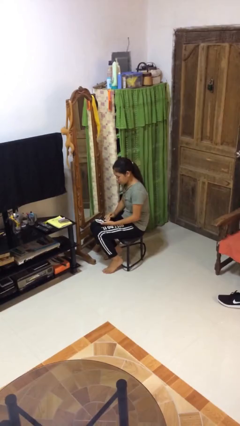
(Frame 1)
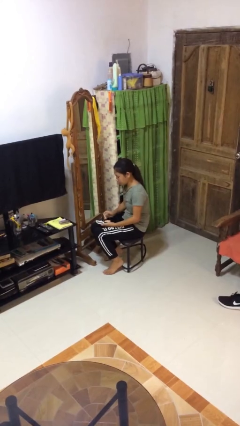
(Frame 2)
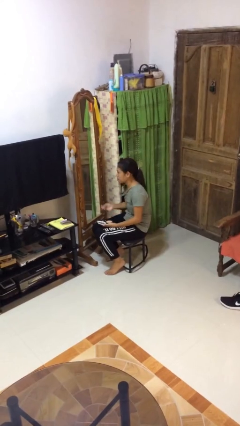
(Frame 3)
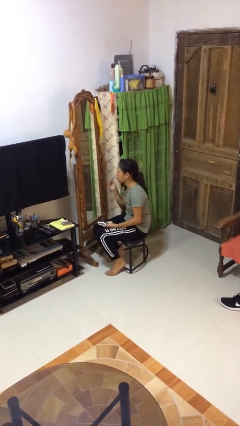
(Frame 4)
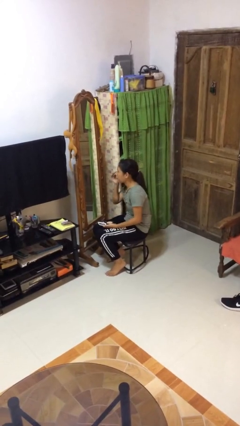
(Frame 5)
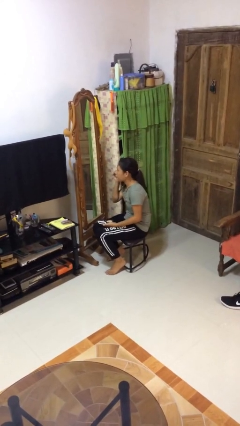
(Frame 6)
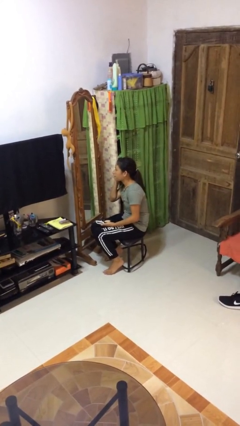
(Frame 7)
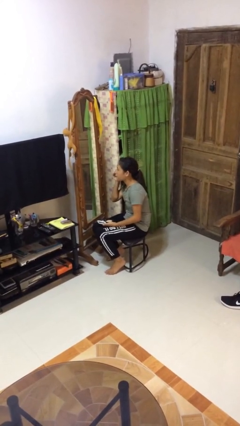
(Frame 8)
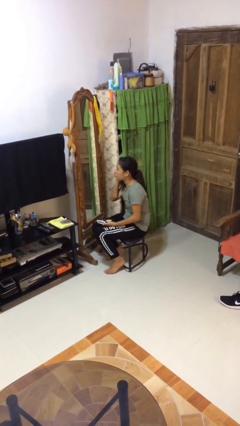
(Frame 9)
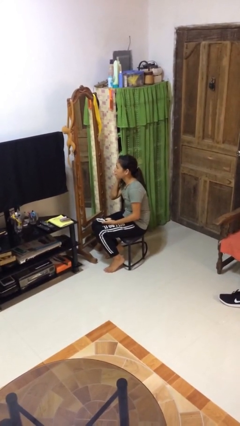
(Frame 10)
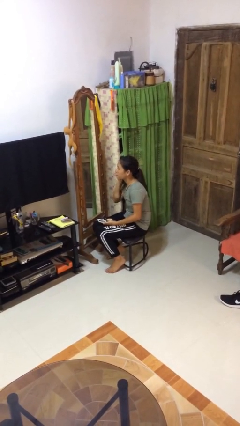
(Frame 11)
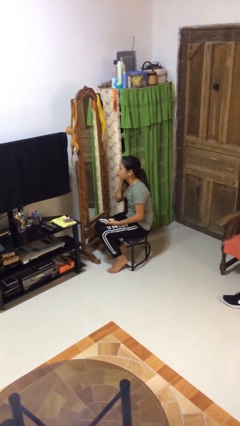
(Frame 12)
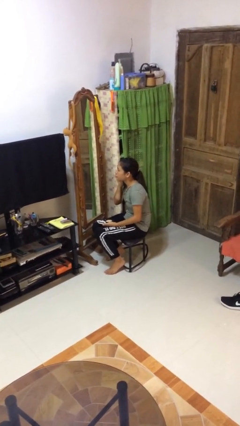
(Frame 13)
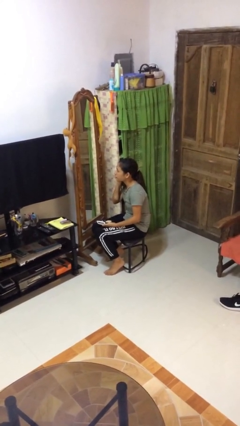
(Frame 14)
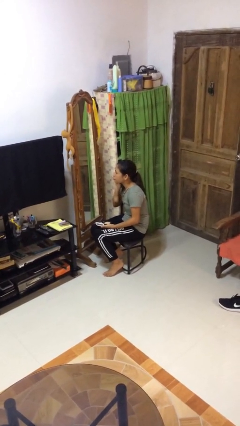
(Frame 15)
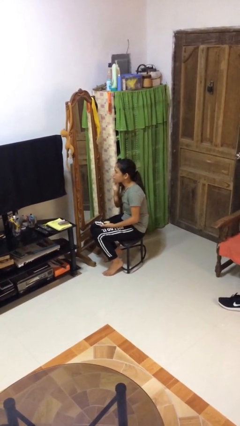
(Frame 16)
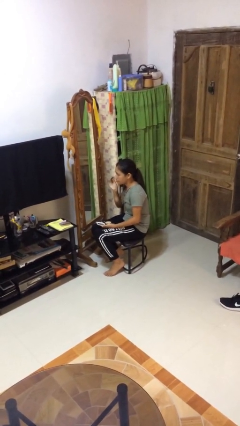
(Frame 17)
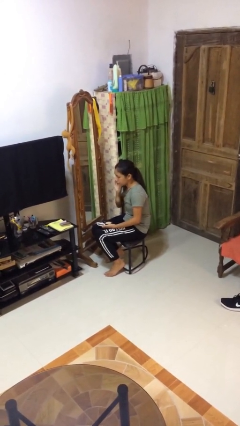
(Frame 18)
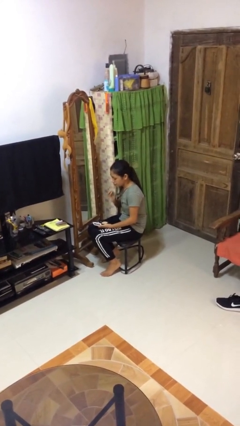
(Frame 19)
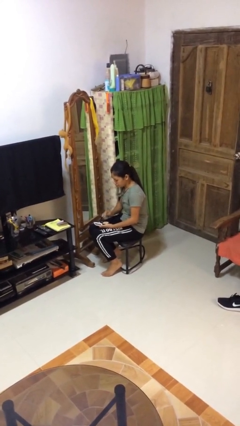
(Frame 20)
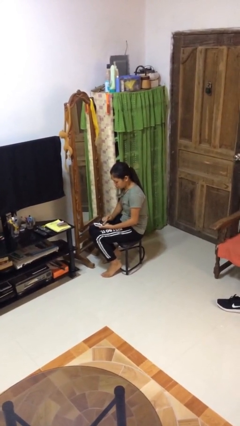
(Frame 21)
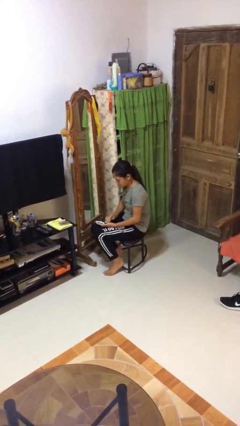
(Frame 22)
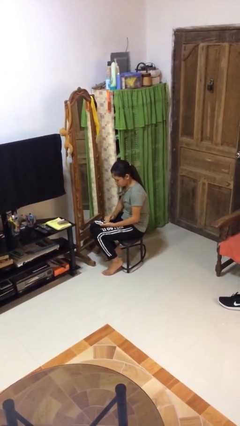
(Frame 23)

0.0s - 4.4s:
person applies foundation makeup

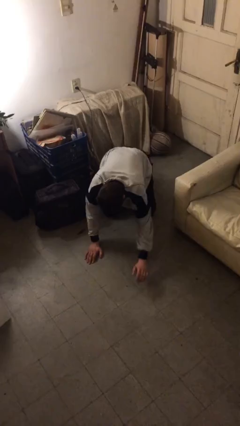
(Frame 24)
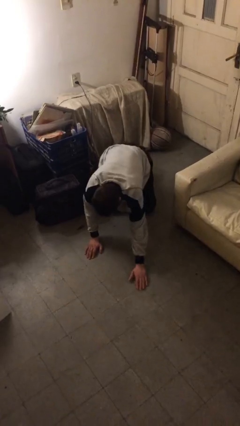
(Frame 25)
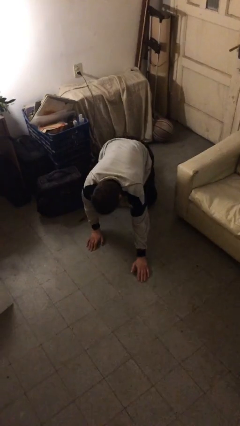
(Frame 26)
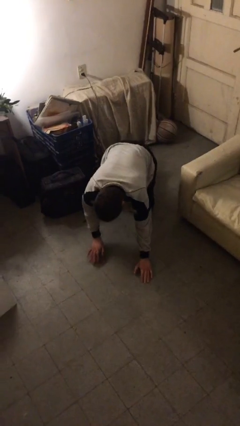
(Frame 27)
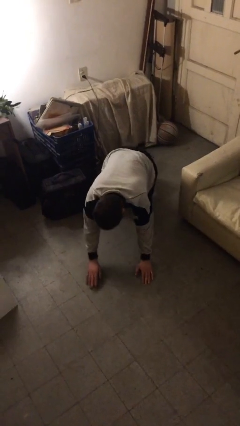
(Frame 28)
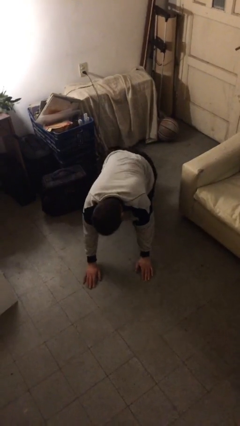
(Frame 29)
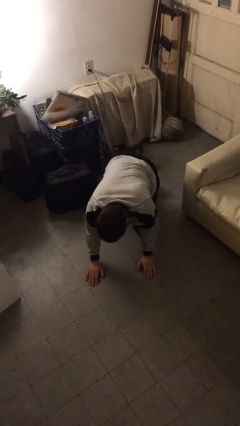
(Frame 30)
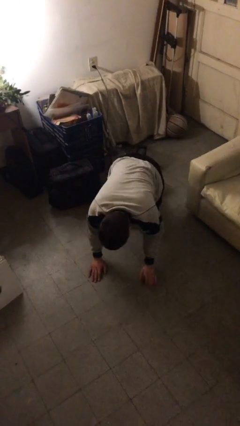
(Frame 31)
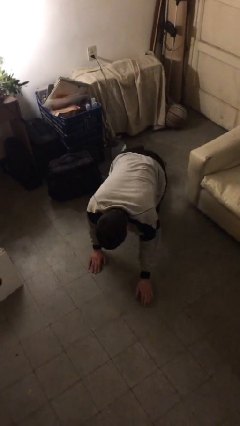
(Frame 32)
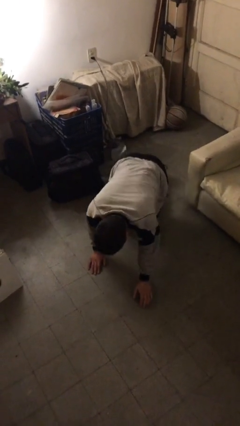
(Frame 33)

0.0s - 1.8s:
person crawls

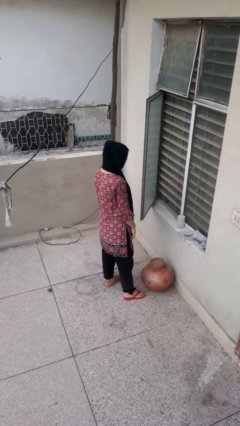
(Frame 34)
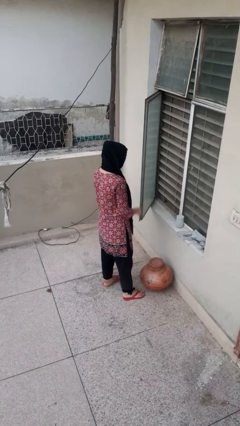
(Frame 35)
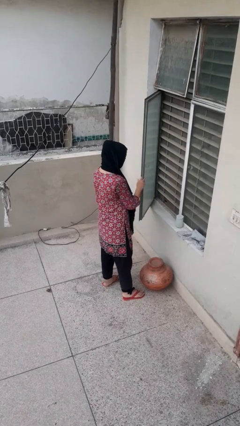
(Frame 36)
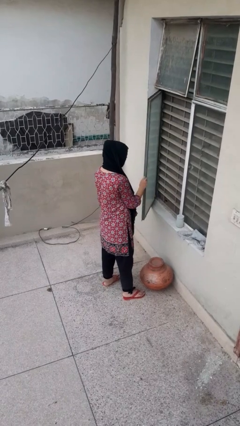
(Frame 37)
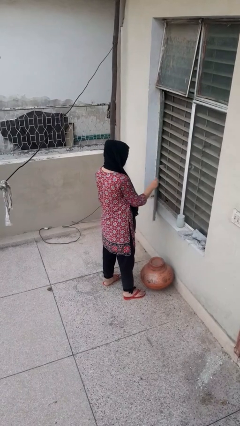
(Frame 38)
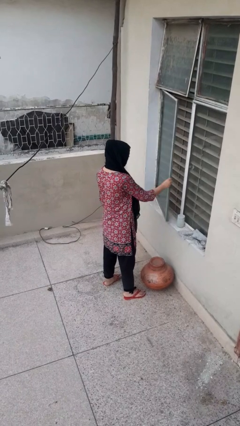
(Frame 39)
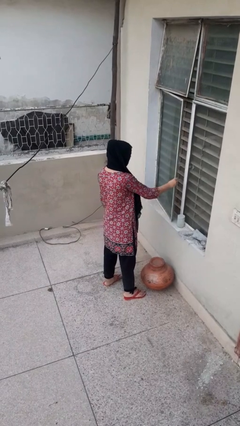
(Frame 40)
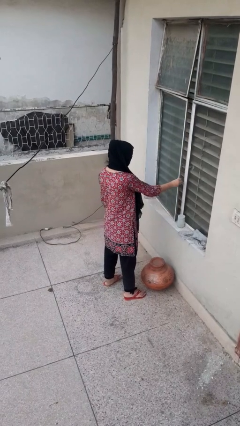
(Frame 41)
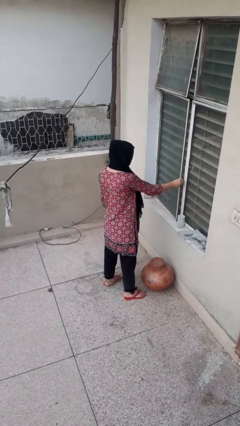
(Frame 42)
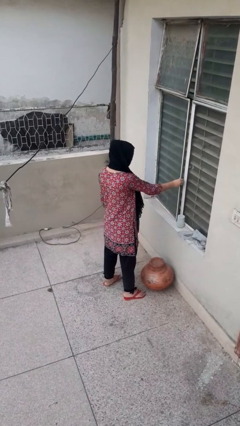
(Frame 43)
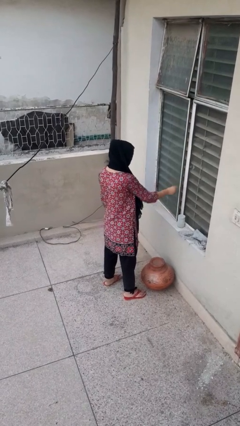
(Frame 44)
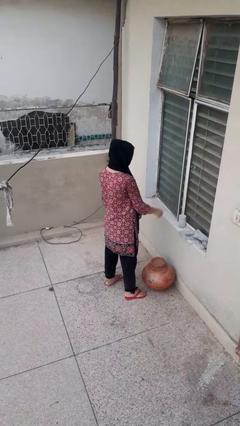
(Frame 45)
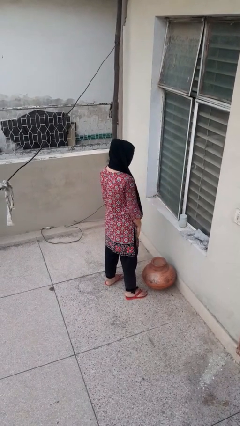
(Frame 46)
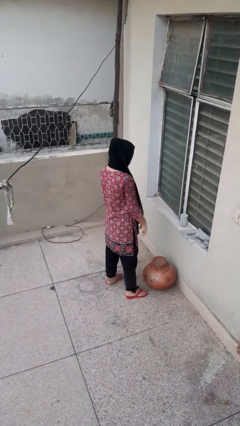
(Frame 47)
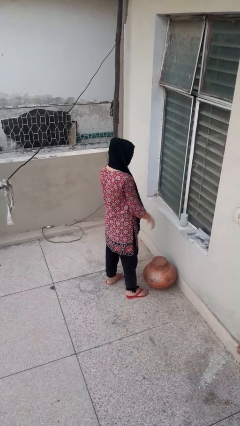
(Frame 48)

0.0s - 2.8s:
person closes home window

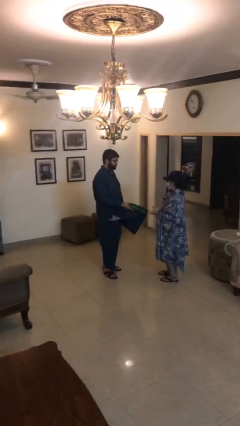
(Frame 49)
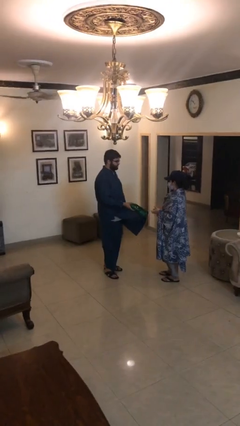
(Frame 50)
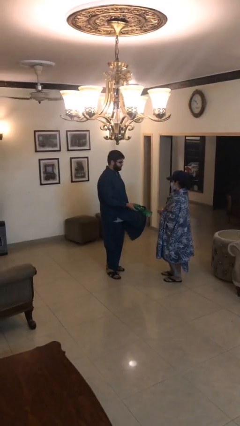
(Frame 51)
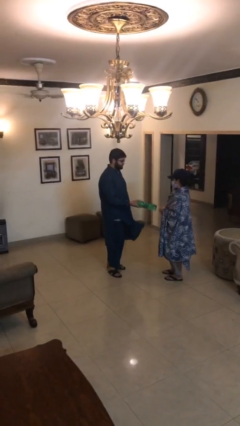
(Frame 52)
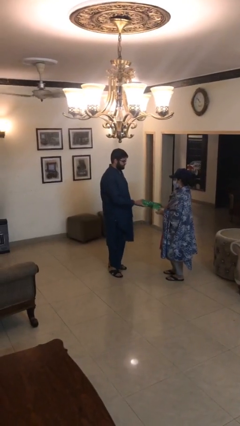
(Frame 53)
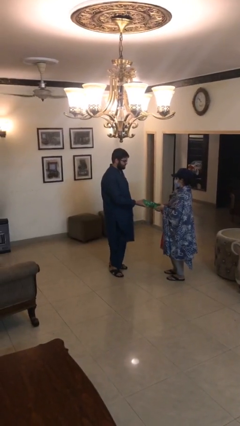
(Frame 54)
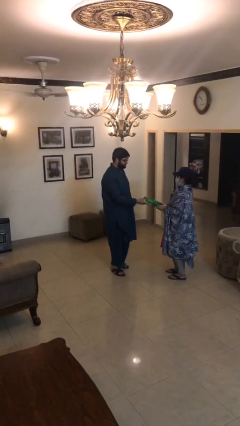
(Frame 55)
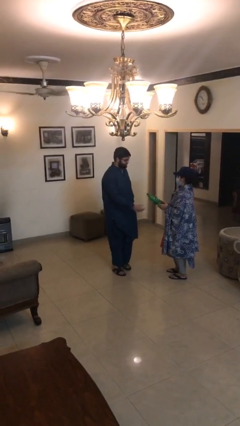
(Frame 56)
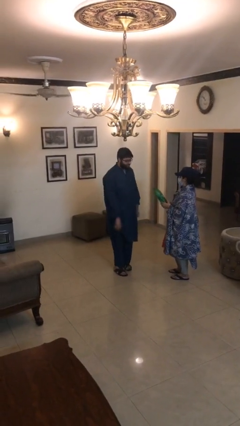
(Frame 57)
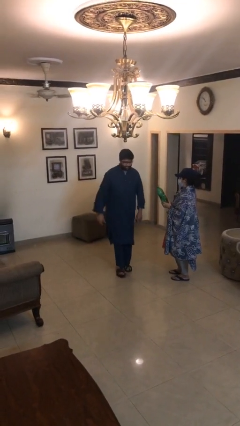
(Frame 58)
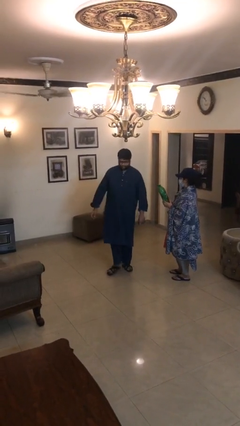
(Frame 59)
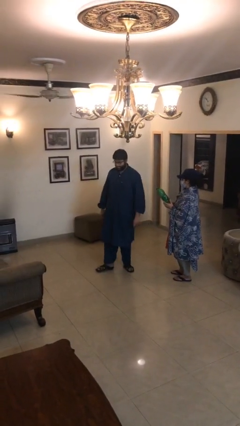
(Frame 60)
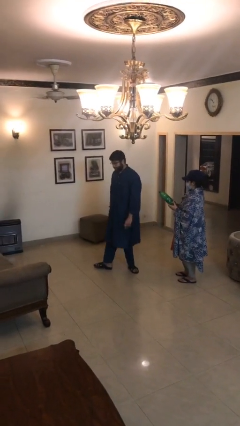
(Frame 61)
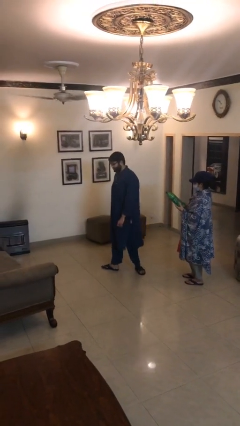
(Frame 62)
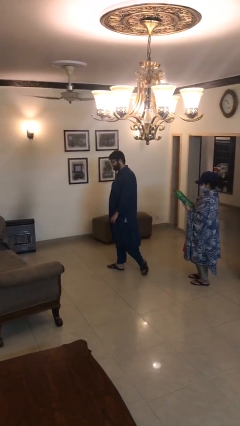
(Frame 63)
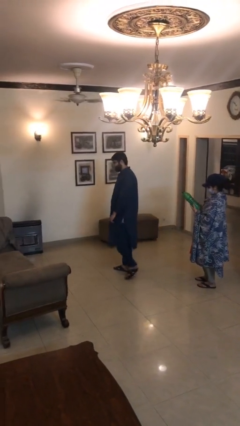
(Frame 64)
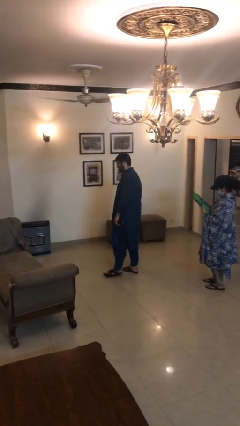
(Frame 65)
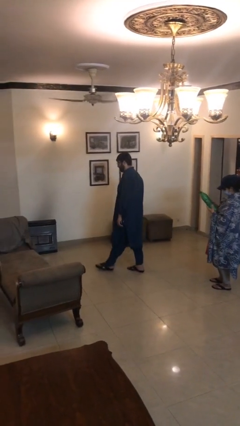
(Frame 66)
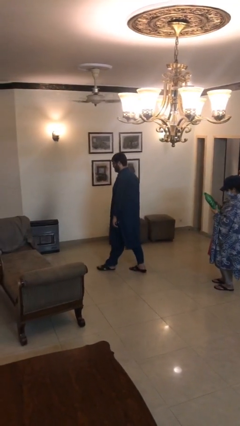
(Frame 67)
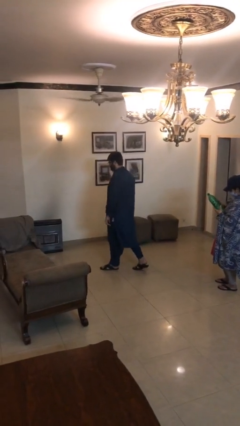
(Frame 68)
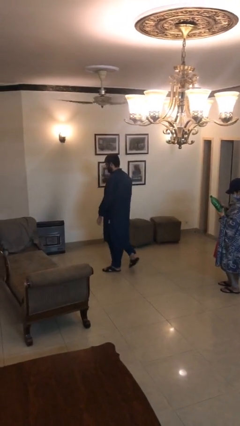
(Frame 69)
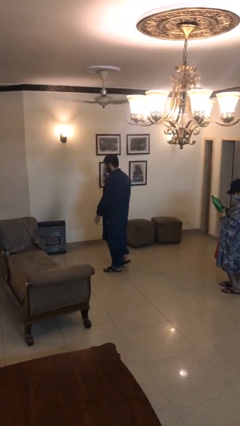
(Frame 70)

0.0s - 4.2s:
person transfers object to person

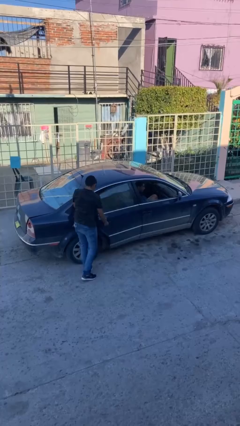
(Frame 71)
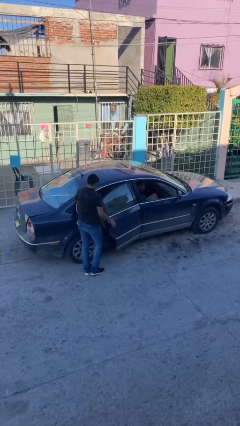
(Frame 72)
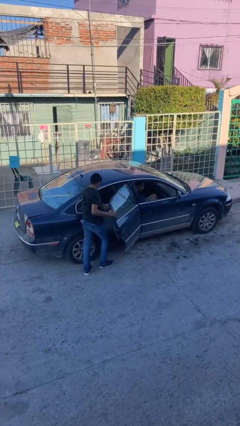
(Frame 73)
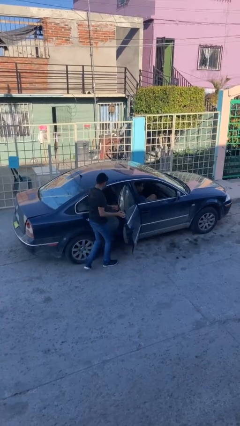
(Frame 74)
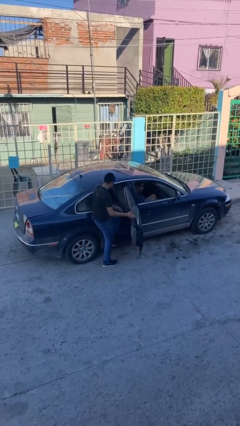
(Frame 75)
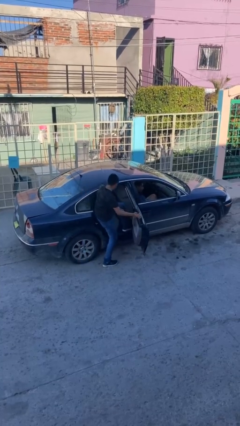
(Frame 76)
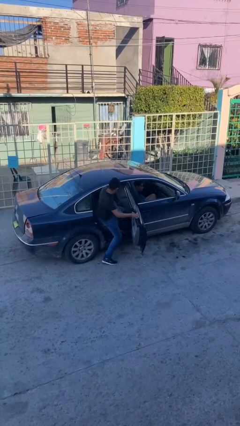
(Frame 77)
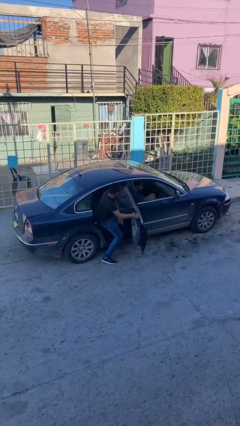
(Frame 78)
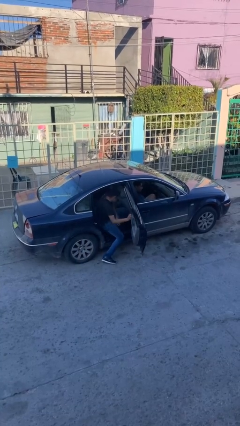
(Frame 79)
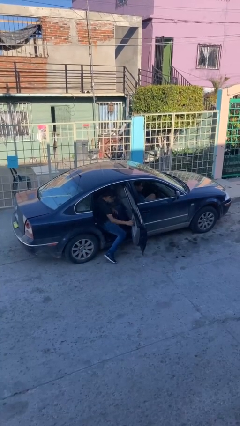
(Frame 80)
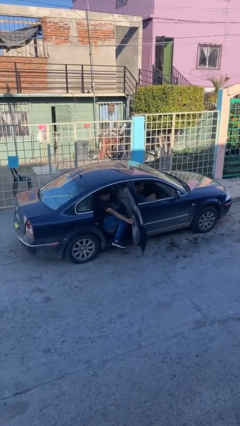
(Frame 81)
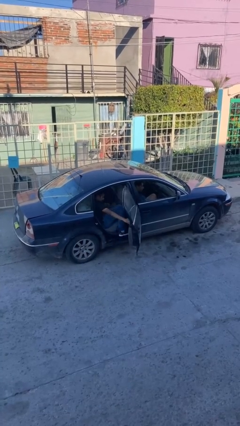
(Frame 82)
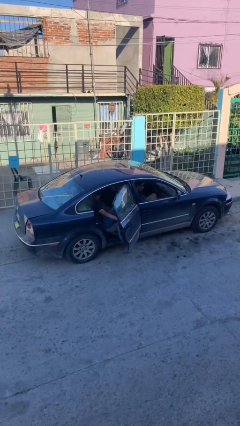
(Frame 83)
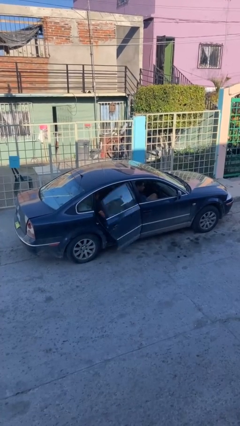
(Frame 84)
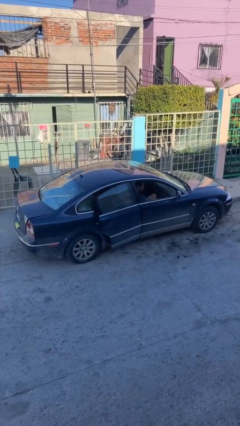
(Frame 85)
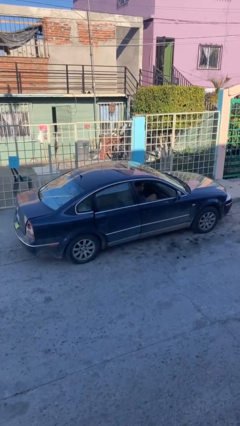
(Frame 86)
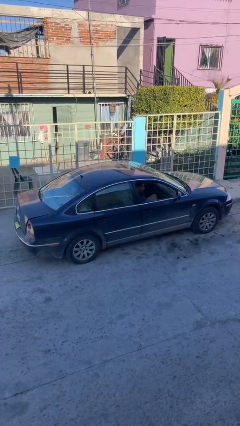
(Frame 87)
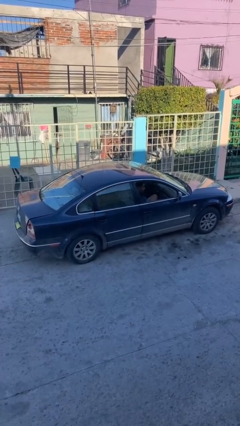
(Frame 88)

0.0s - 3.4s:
car picks up person

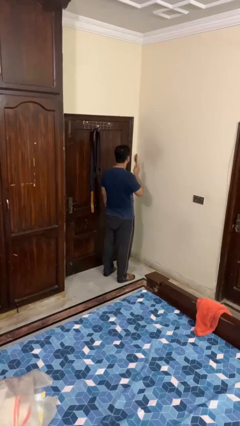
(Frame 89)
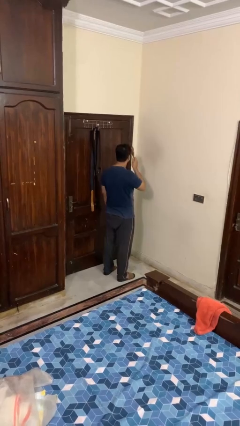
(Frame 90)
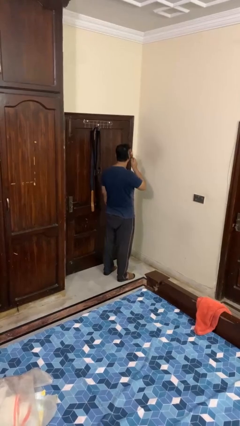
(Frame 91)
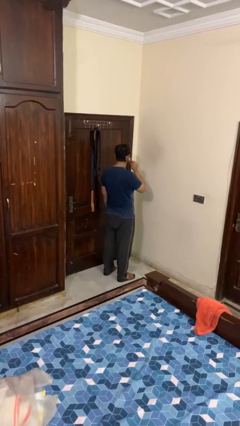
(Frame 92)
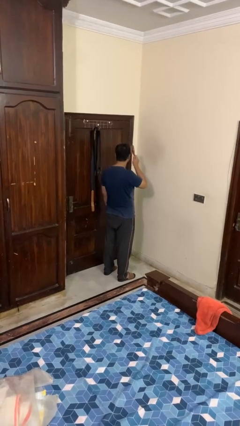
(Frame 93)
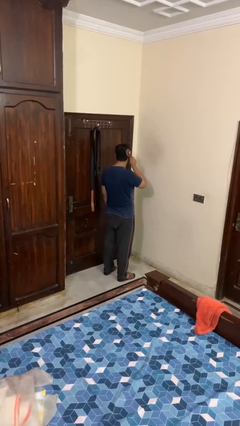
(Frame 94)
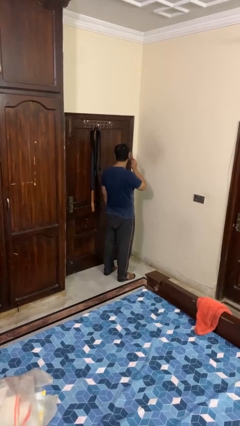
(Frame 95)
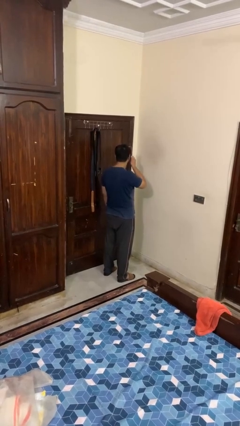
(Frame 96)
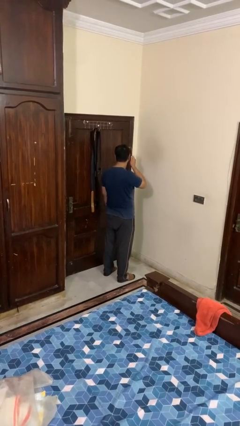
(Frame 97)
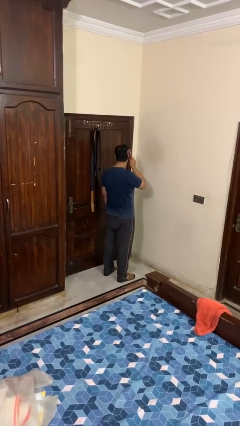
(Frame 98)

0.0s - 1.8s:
person brushes hair
